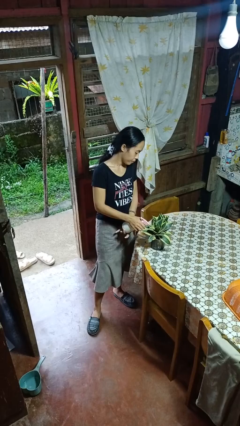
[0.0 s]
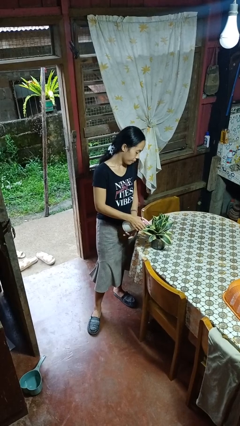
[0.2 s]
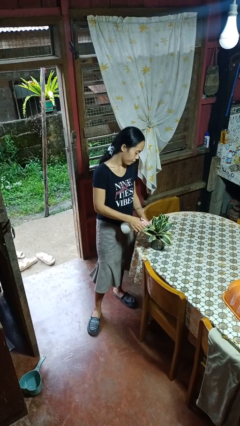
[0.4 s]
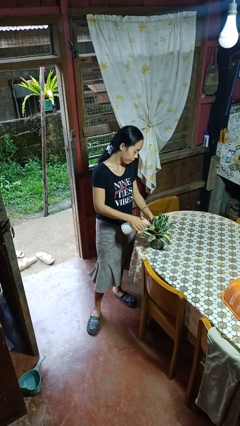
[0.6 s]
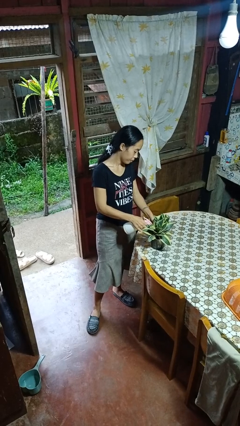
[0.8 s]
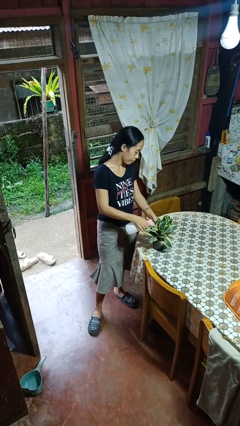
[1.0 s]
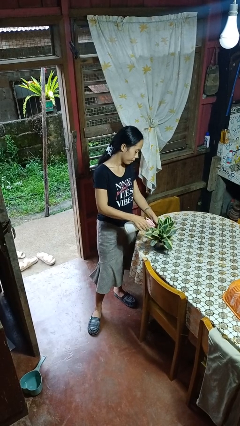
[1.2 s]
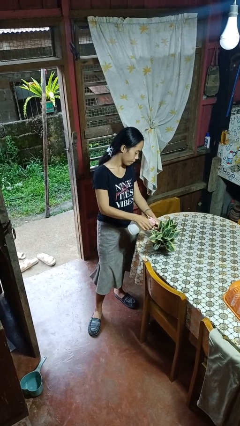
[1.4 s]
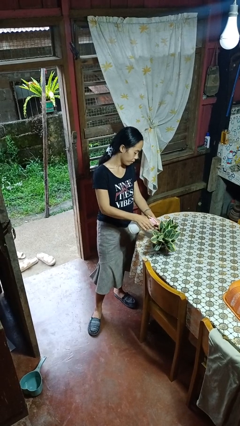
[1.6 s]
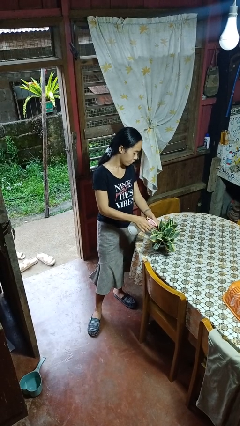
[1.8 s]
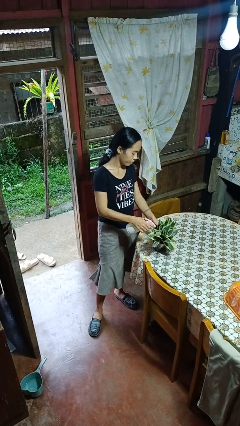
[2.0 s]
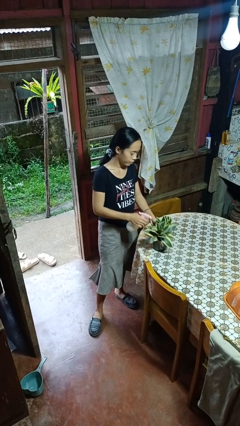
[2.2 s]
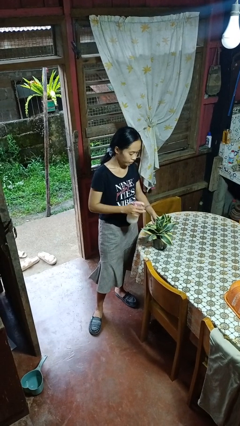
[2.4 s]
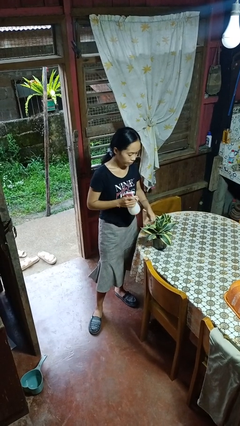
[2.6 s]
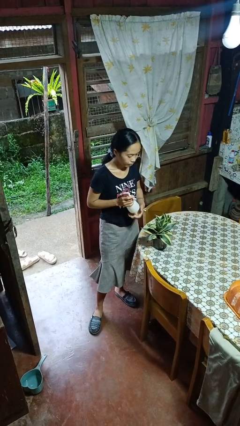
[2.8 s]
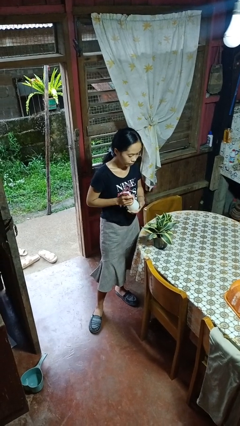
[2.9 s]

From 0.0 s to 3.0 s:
person waters houseplant

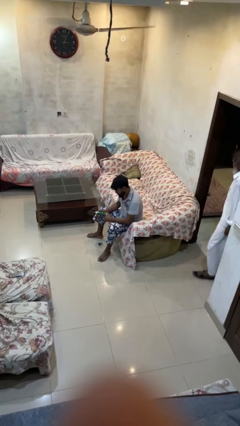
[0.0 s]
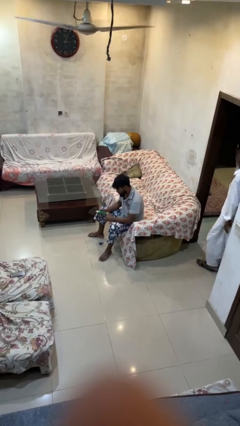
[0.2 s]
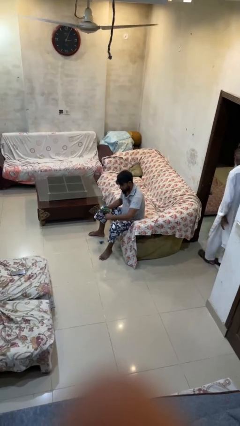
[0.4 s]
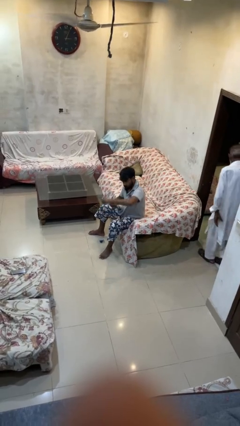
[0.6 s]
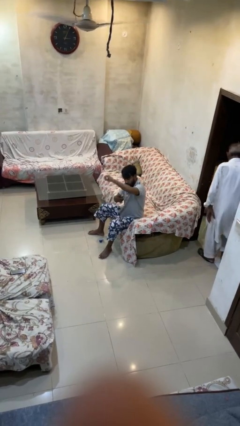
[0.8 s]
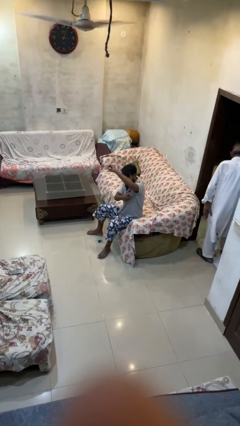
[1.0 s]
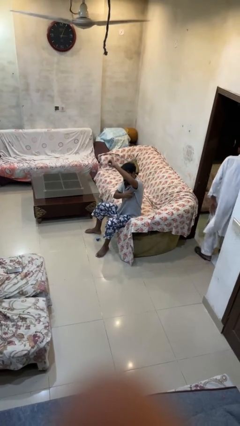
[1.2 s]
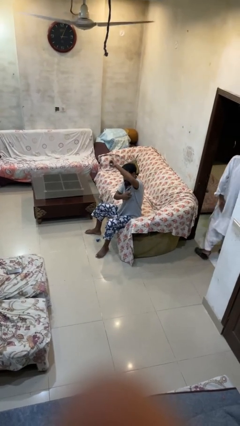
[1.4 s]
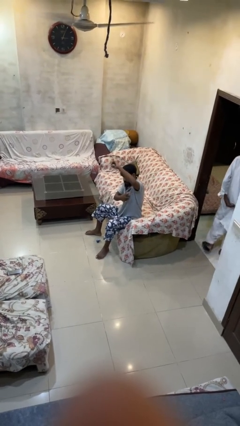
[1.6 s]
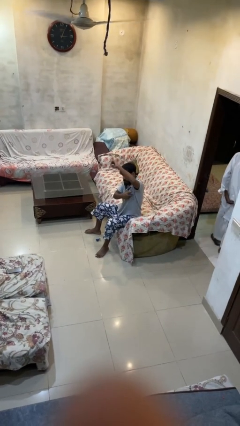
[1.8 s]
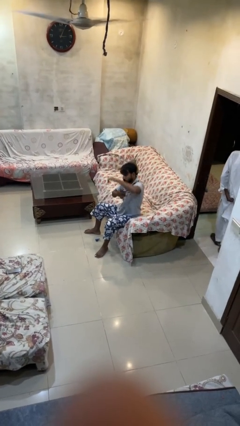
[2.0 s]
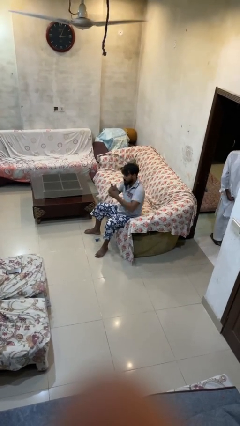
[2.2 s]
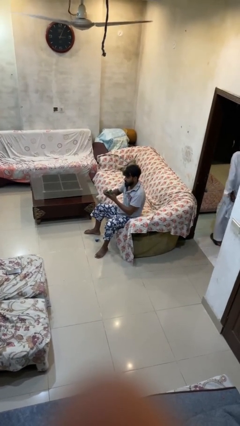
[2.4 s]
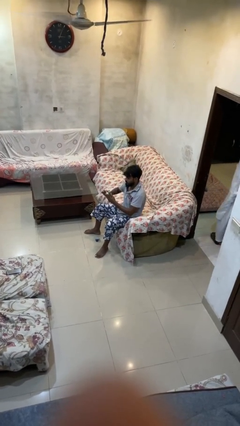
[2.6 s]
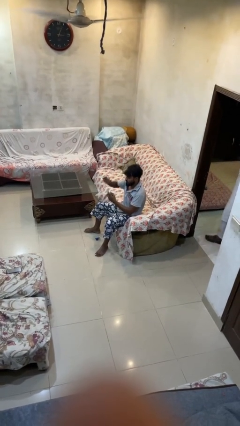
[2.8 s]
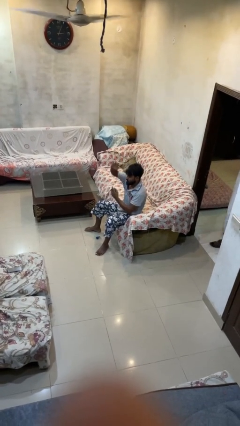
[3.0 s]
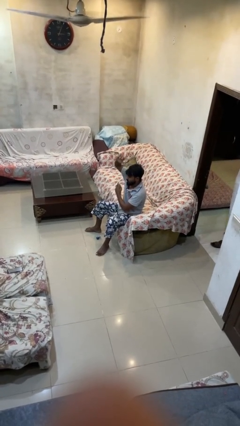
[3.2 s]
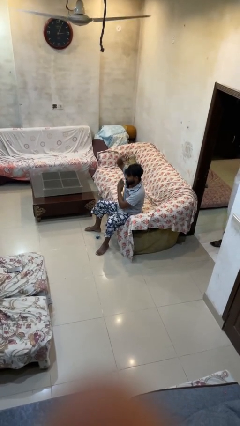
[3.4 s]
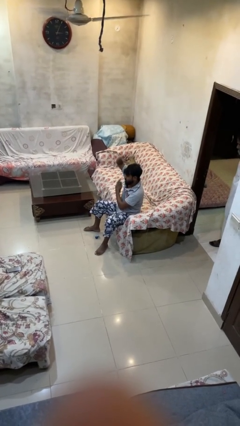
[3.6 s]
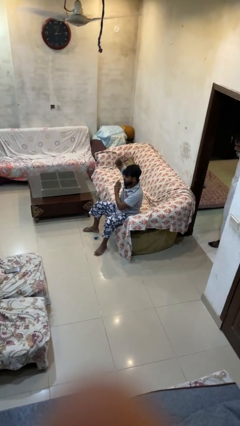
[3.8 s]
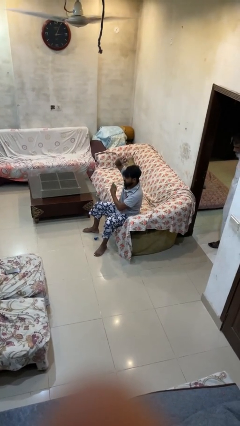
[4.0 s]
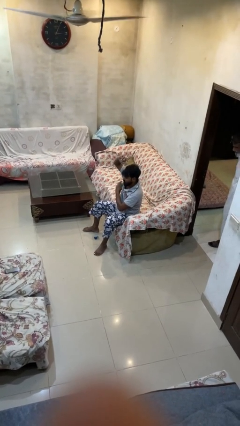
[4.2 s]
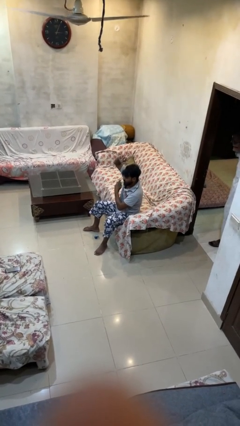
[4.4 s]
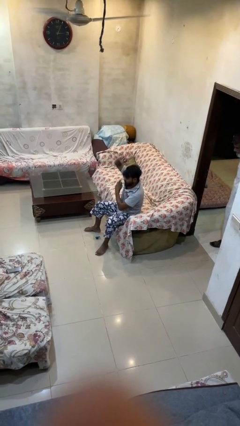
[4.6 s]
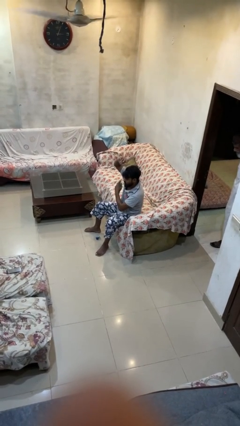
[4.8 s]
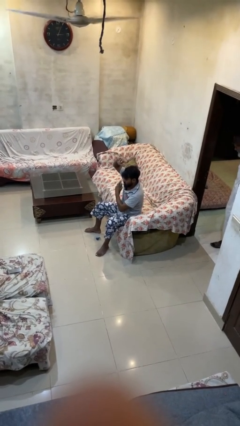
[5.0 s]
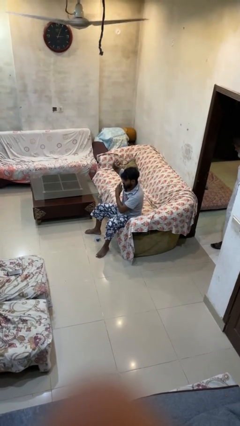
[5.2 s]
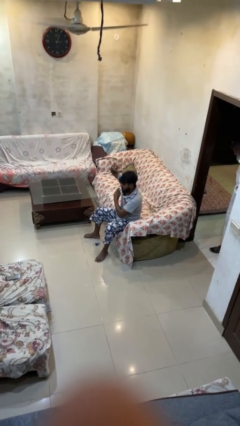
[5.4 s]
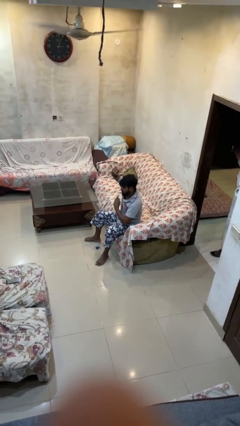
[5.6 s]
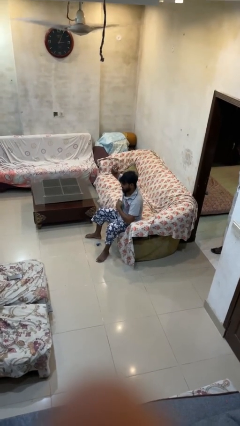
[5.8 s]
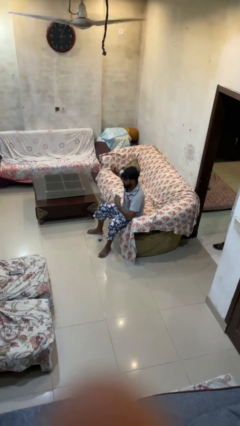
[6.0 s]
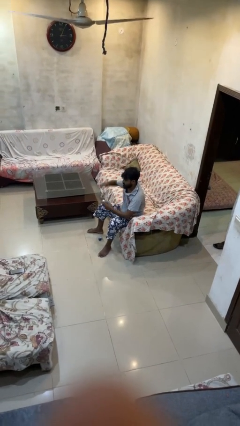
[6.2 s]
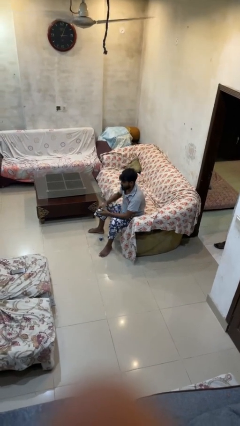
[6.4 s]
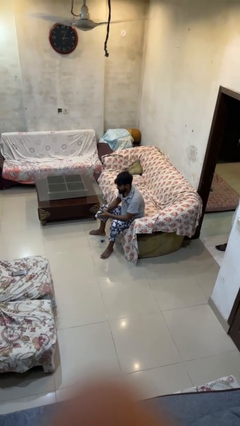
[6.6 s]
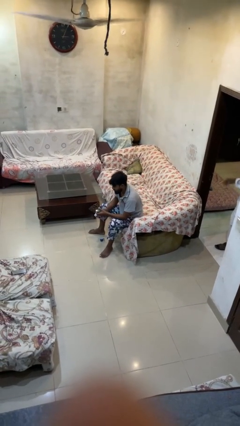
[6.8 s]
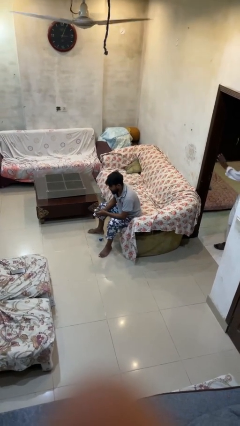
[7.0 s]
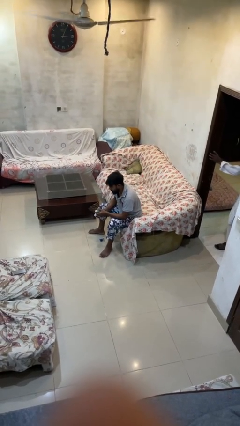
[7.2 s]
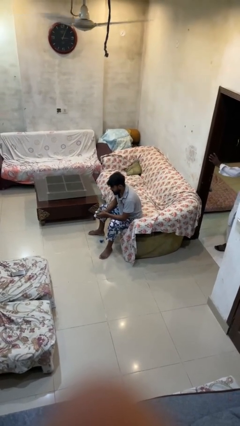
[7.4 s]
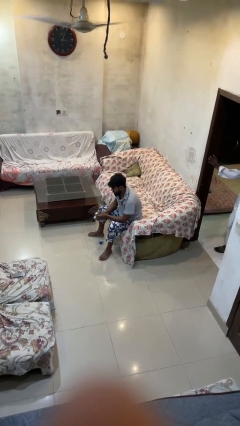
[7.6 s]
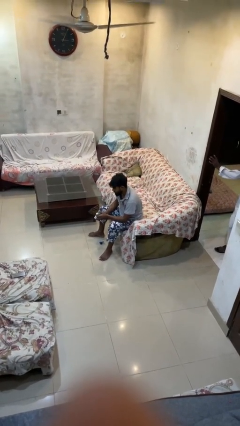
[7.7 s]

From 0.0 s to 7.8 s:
person applies deodorant

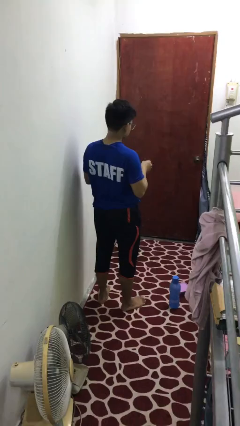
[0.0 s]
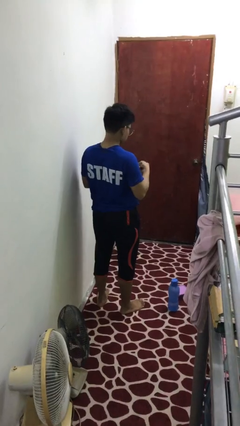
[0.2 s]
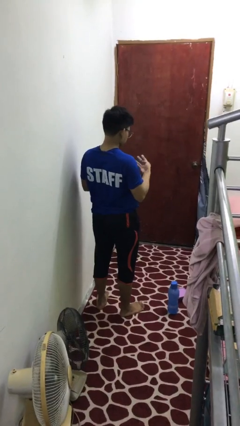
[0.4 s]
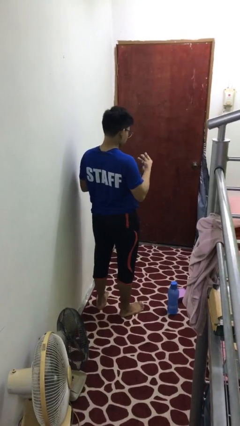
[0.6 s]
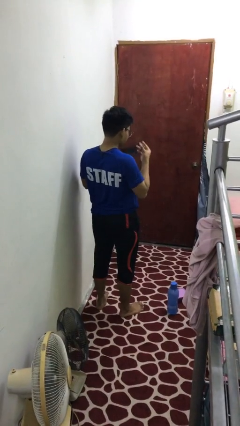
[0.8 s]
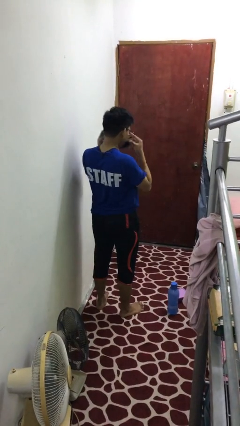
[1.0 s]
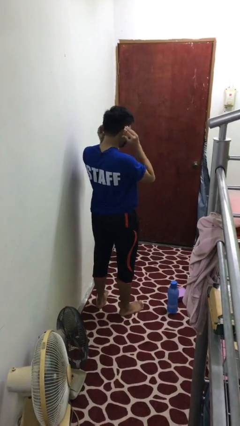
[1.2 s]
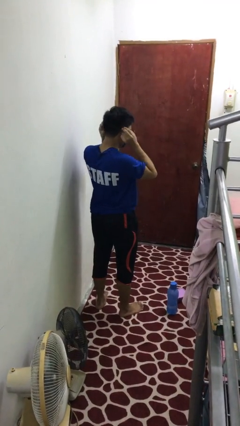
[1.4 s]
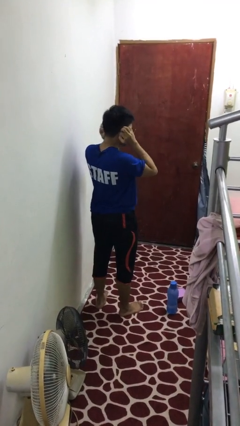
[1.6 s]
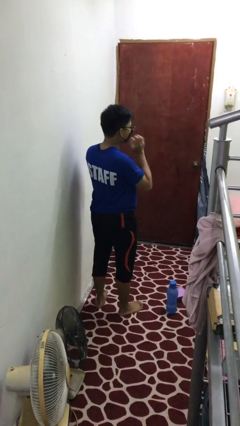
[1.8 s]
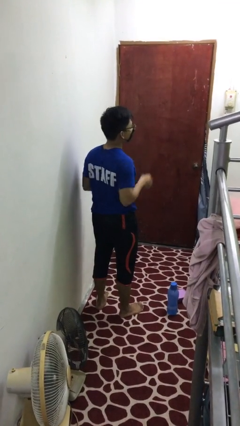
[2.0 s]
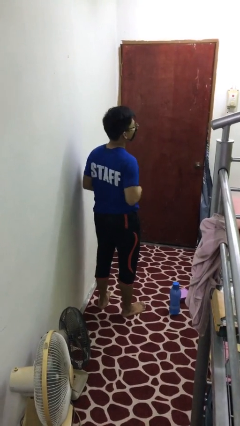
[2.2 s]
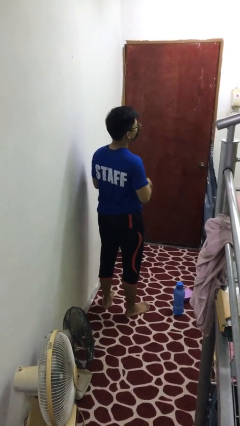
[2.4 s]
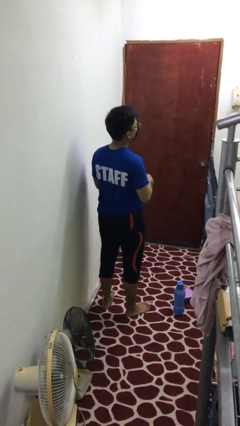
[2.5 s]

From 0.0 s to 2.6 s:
person puts on facemask

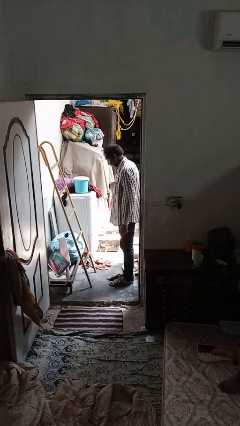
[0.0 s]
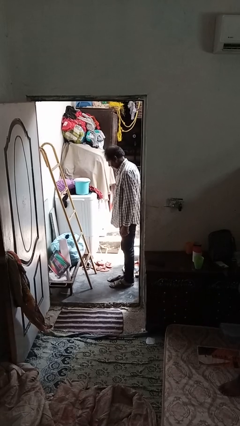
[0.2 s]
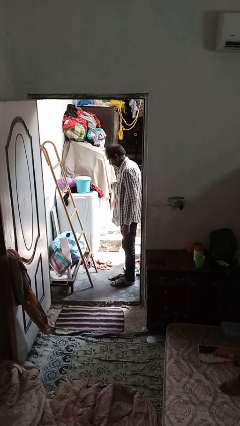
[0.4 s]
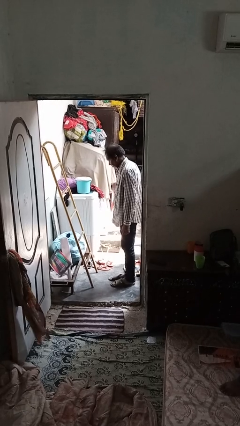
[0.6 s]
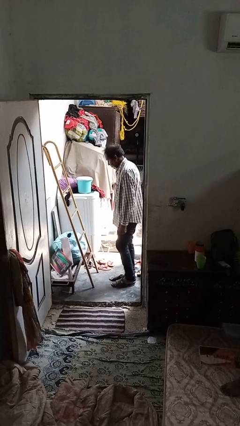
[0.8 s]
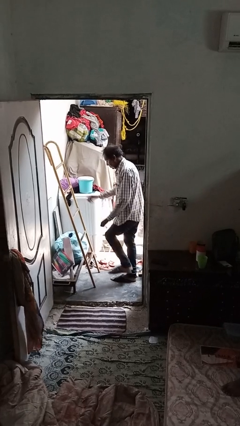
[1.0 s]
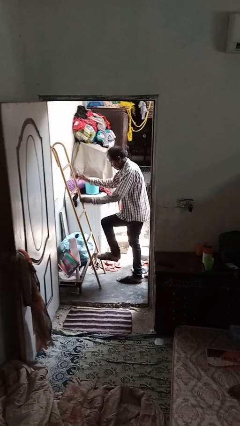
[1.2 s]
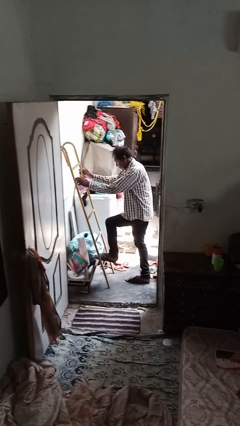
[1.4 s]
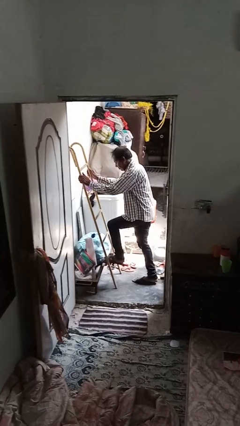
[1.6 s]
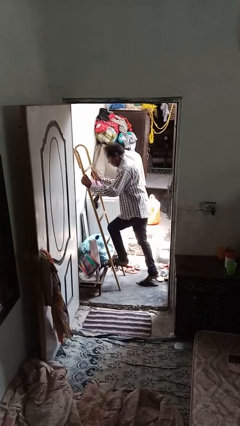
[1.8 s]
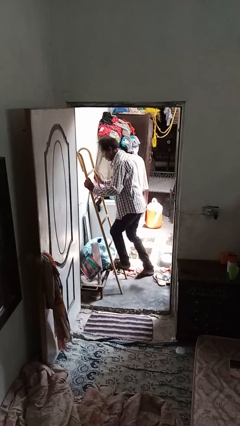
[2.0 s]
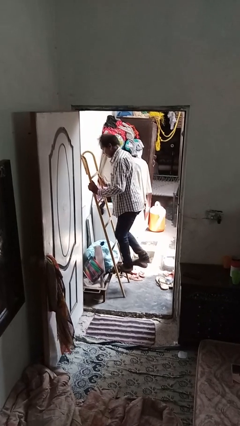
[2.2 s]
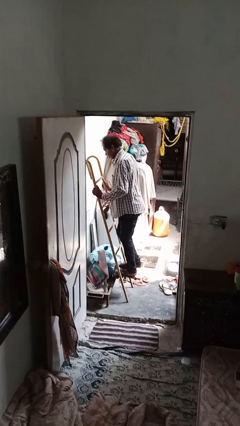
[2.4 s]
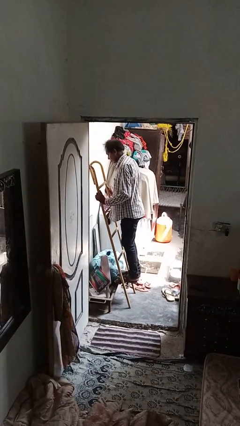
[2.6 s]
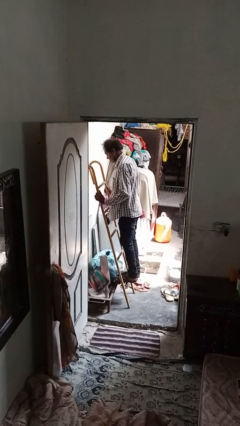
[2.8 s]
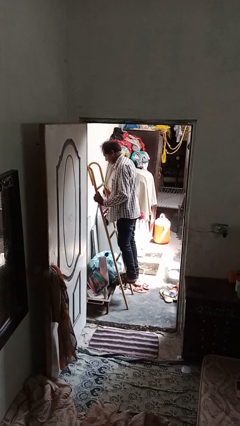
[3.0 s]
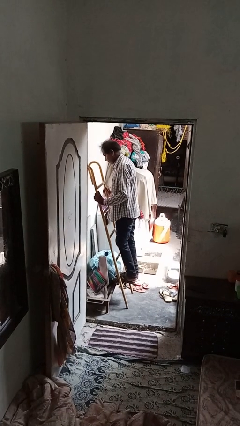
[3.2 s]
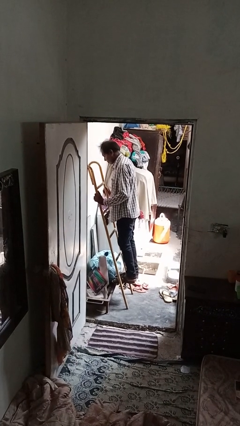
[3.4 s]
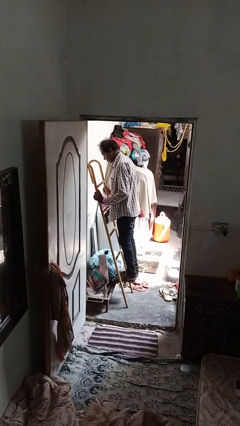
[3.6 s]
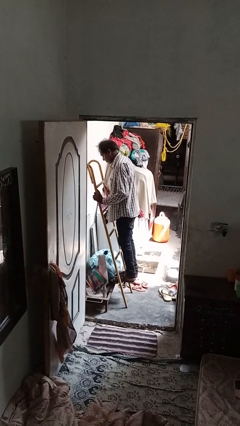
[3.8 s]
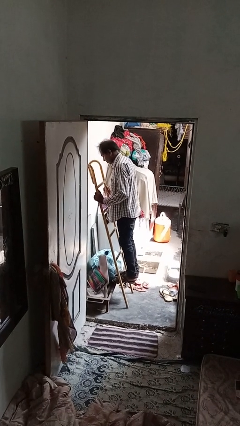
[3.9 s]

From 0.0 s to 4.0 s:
person climbs up ladder

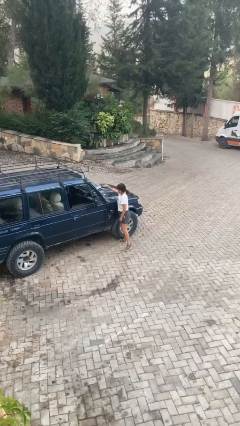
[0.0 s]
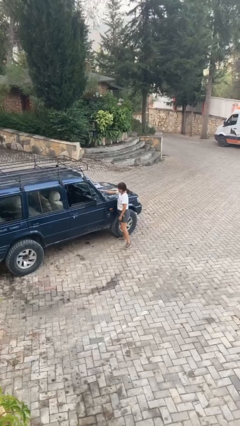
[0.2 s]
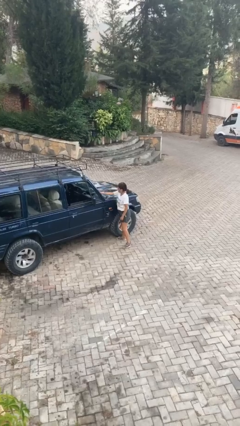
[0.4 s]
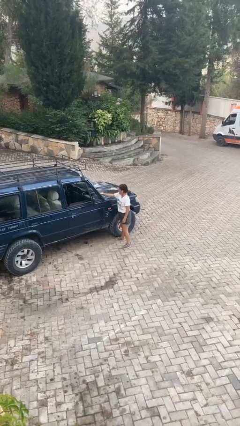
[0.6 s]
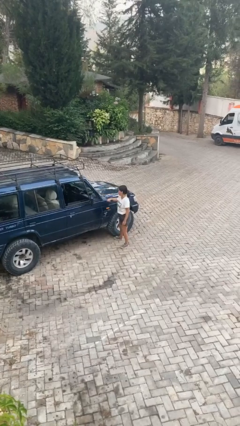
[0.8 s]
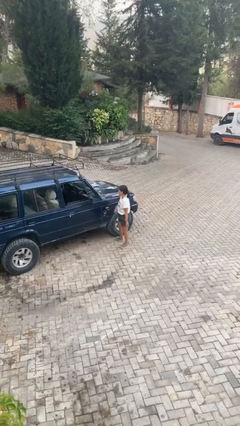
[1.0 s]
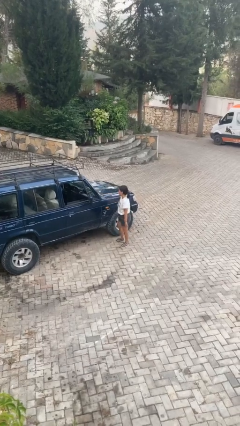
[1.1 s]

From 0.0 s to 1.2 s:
person flips down car wipers
